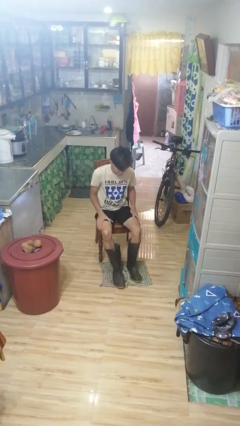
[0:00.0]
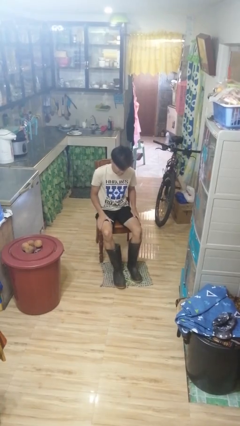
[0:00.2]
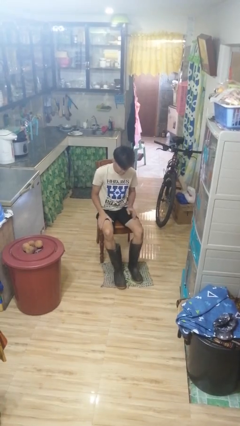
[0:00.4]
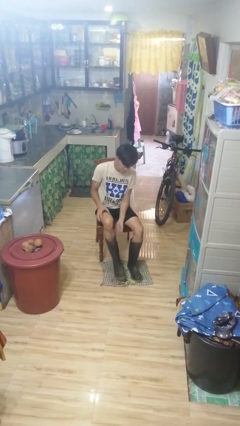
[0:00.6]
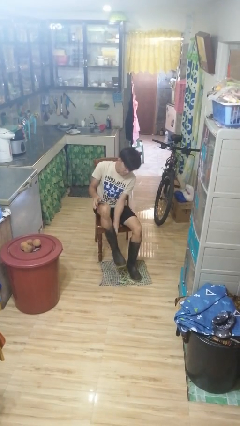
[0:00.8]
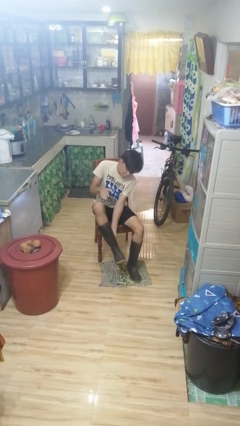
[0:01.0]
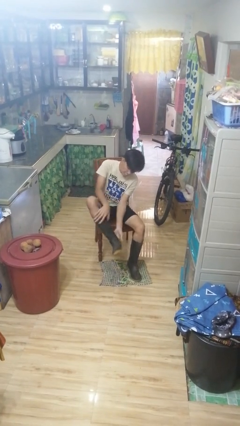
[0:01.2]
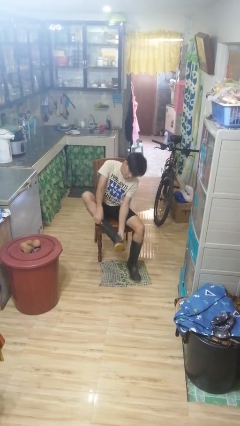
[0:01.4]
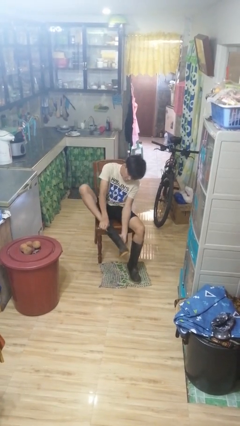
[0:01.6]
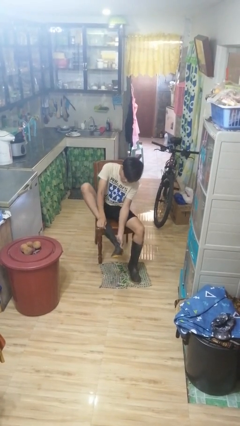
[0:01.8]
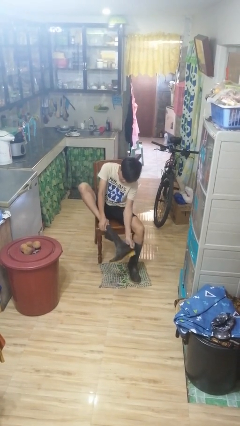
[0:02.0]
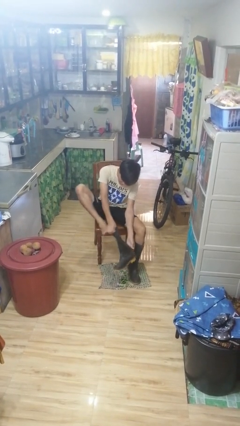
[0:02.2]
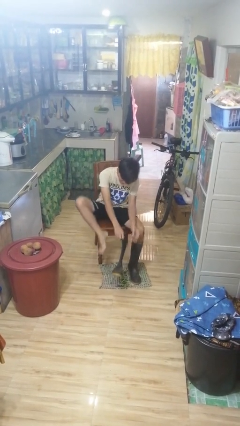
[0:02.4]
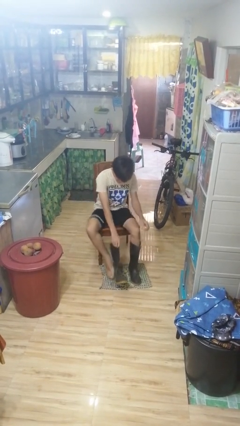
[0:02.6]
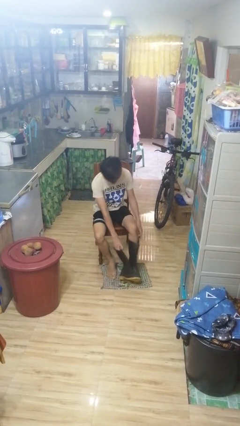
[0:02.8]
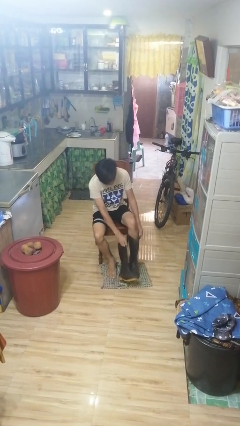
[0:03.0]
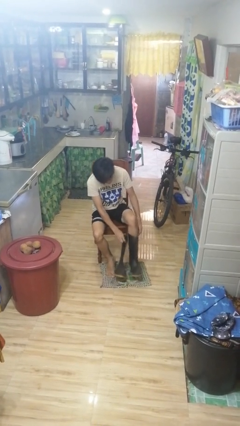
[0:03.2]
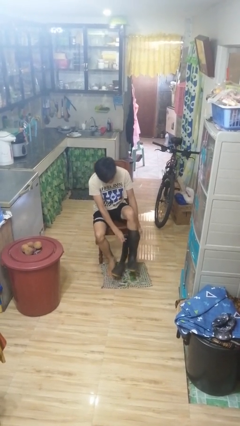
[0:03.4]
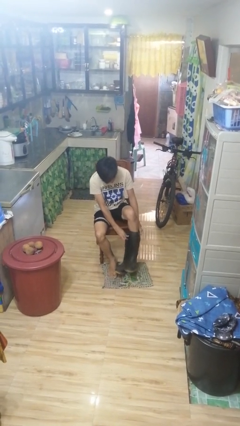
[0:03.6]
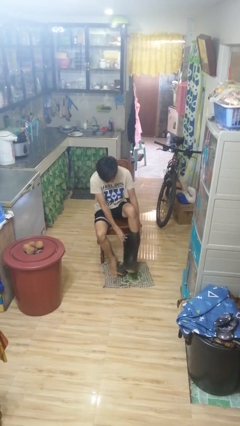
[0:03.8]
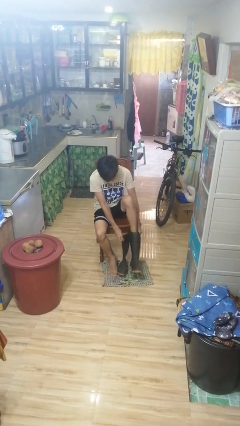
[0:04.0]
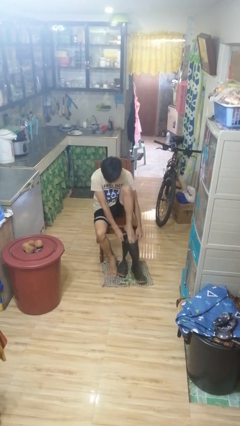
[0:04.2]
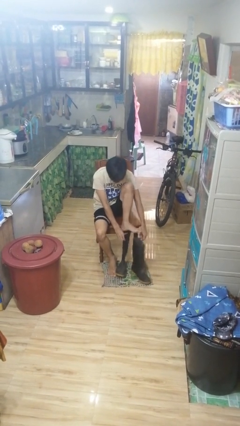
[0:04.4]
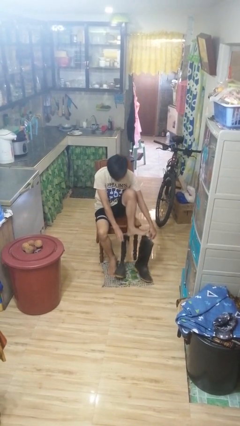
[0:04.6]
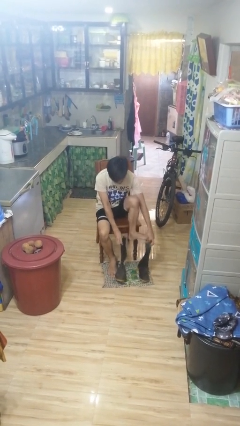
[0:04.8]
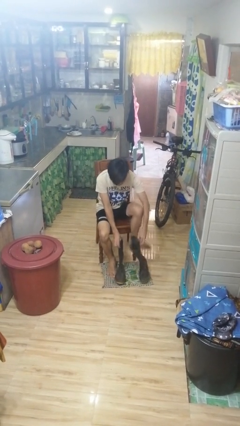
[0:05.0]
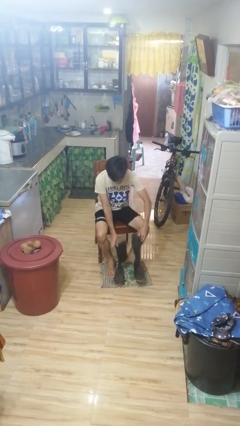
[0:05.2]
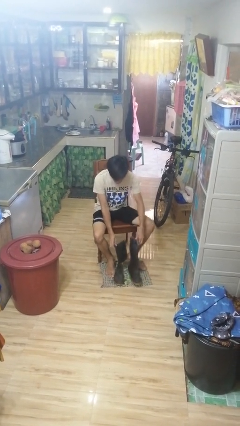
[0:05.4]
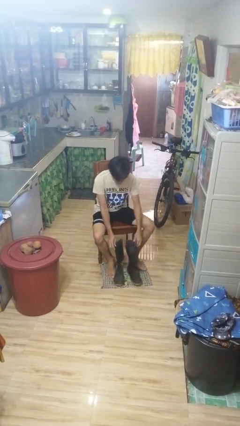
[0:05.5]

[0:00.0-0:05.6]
person takes off boots

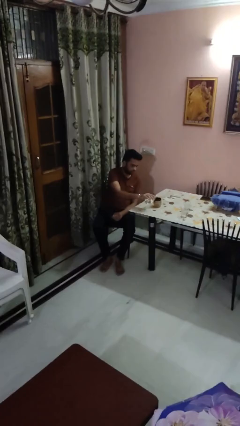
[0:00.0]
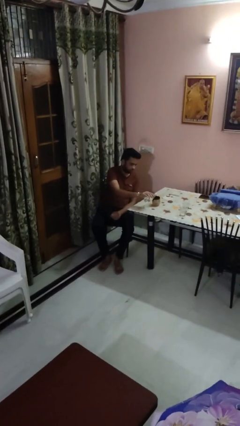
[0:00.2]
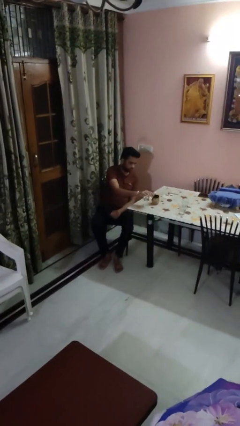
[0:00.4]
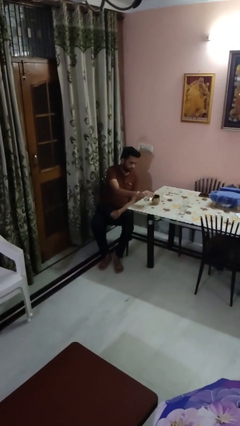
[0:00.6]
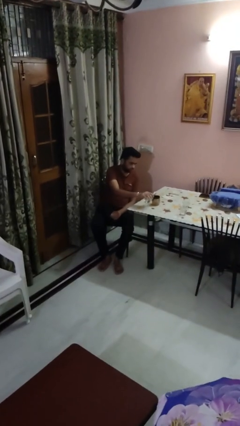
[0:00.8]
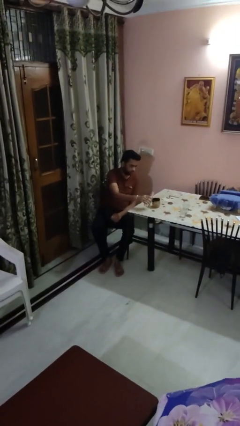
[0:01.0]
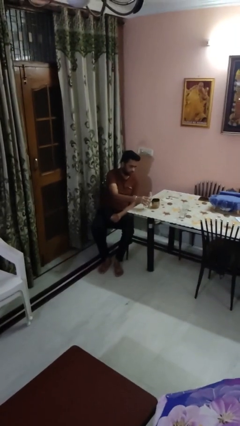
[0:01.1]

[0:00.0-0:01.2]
person pours liquid into cup

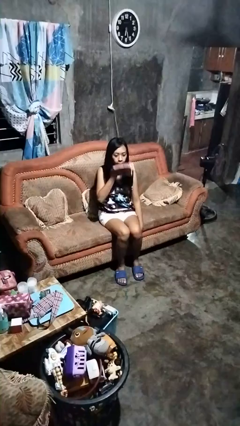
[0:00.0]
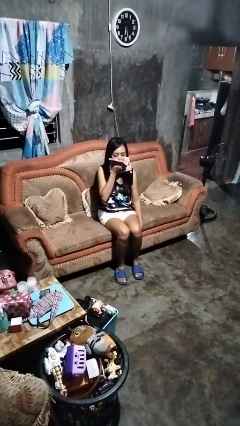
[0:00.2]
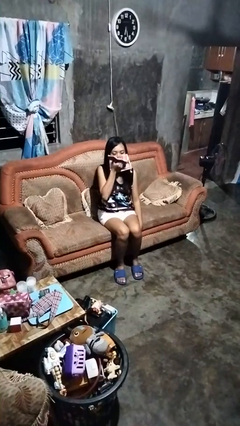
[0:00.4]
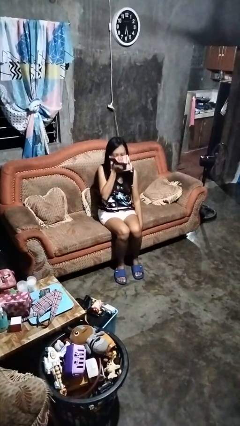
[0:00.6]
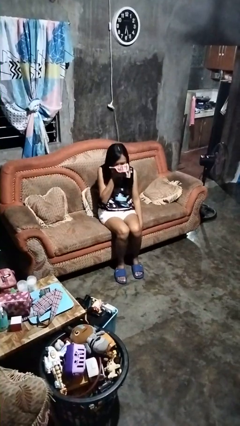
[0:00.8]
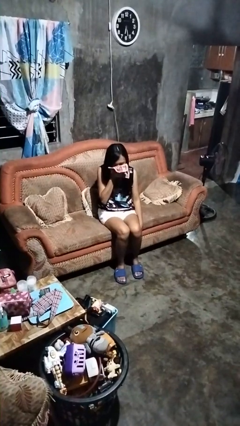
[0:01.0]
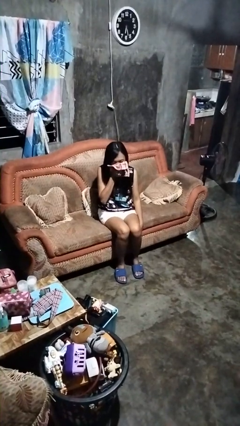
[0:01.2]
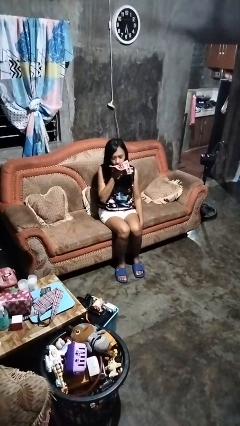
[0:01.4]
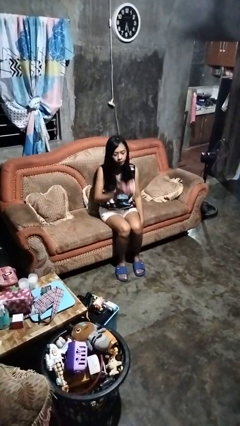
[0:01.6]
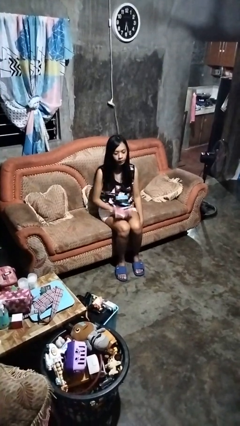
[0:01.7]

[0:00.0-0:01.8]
person blows nose

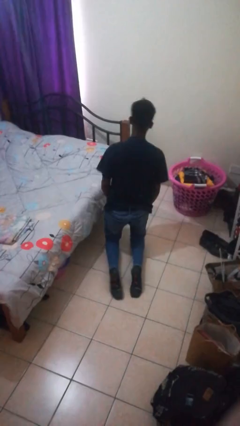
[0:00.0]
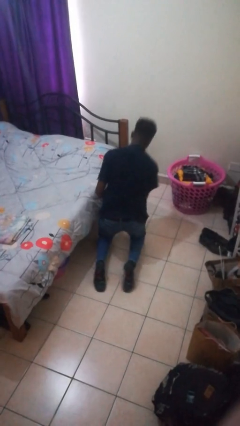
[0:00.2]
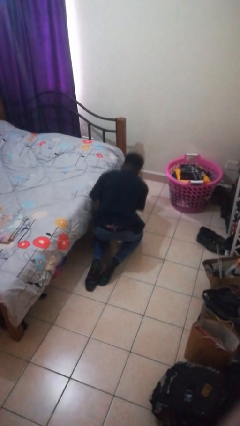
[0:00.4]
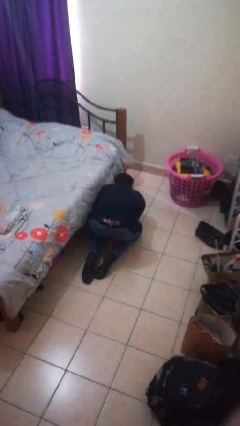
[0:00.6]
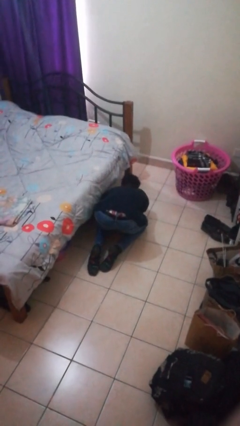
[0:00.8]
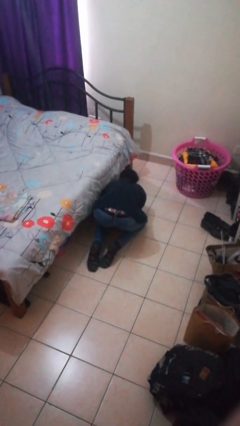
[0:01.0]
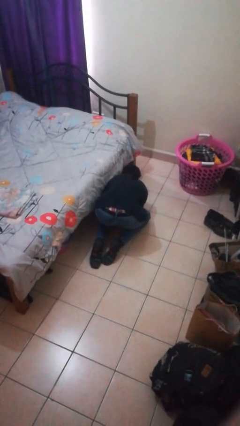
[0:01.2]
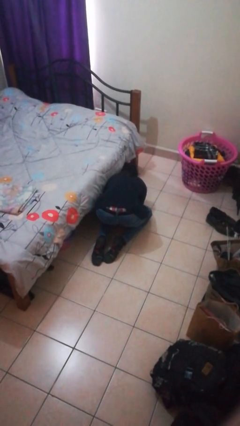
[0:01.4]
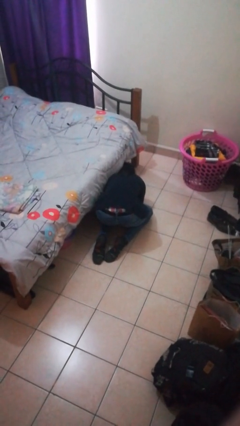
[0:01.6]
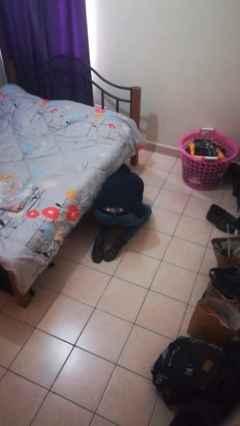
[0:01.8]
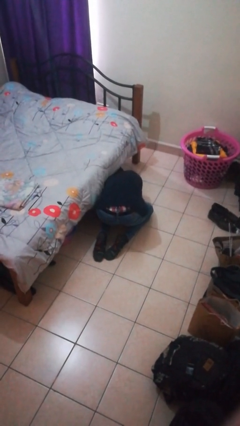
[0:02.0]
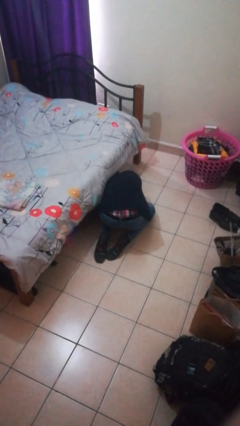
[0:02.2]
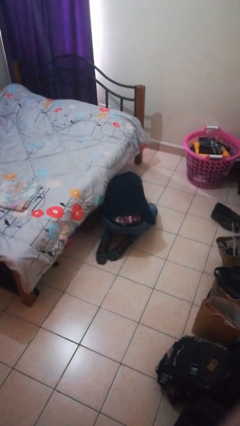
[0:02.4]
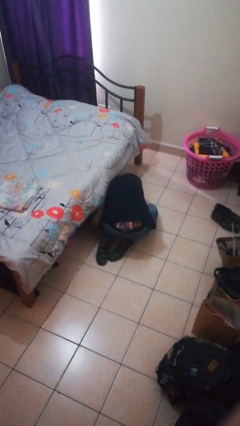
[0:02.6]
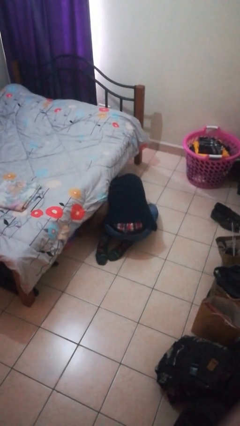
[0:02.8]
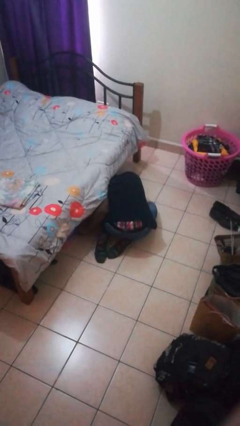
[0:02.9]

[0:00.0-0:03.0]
person searches under bed

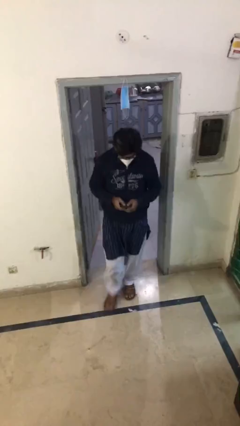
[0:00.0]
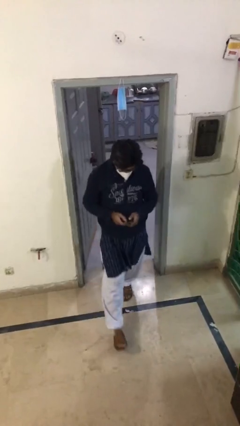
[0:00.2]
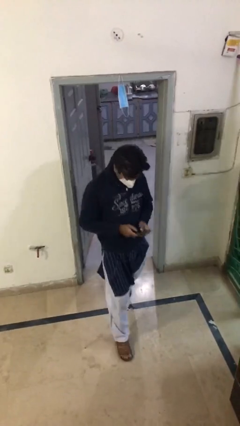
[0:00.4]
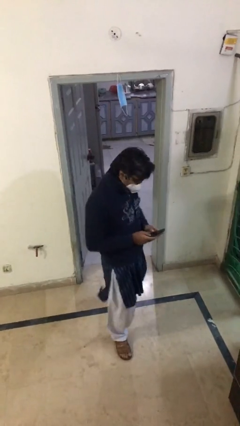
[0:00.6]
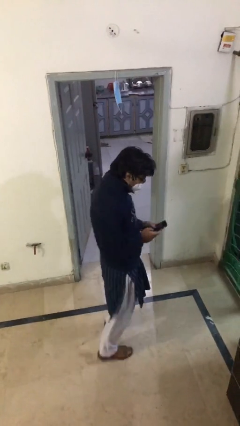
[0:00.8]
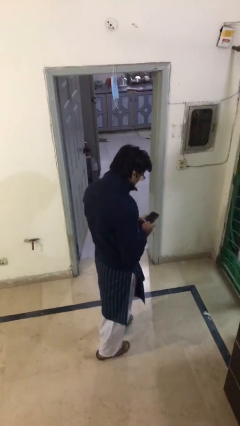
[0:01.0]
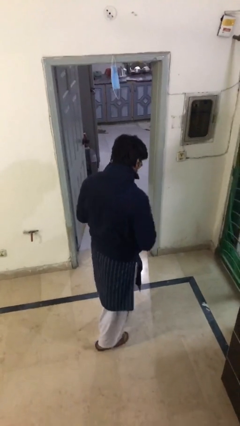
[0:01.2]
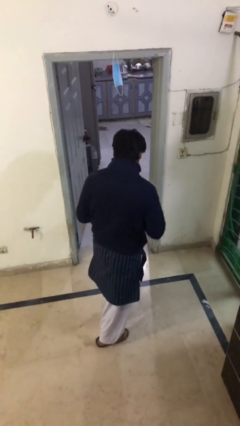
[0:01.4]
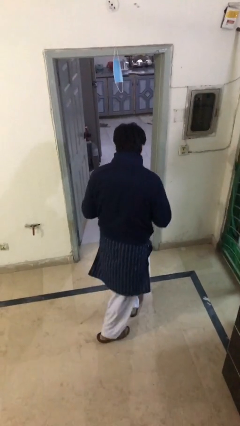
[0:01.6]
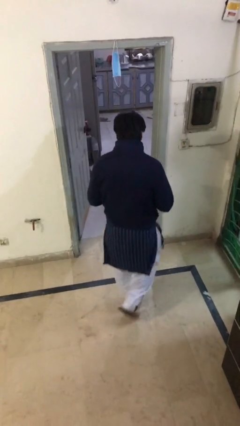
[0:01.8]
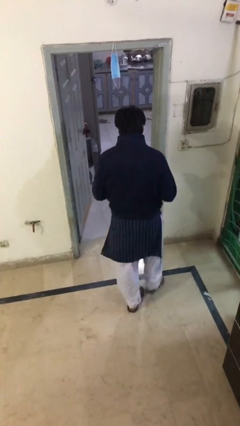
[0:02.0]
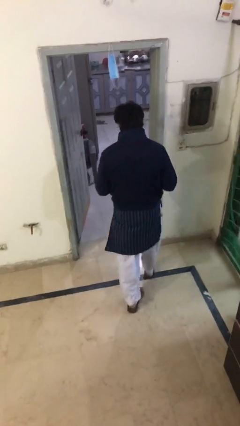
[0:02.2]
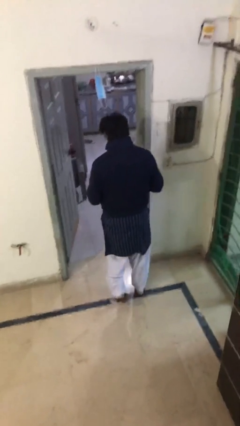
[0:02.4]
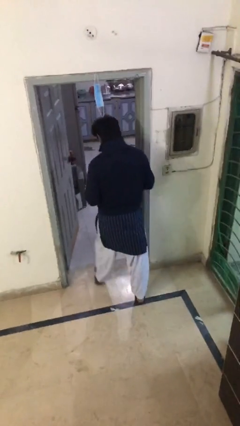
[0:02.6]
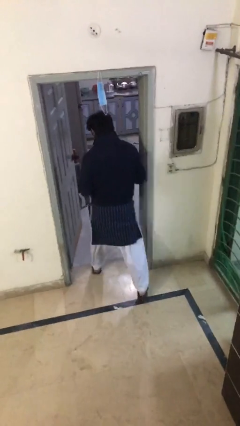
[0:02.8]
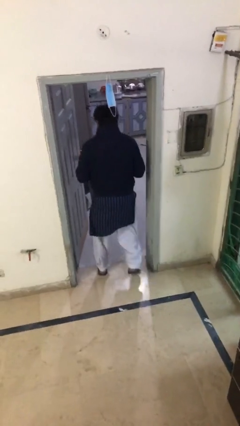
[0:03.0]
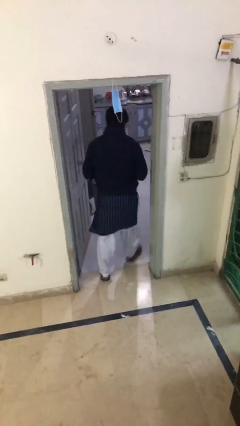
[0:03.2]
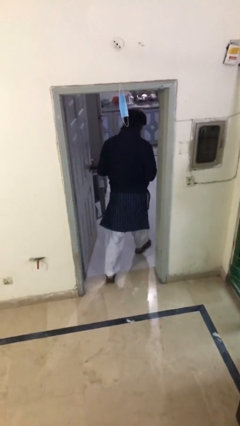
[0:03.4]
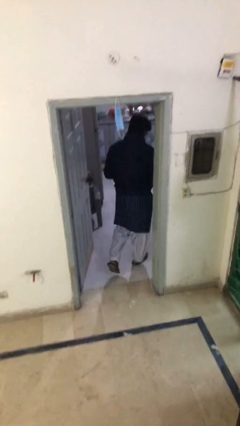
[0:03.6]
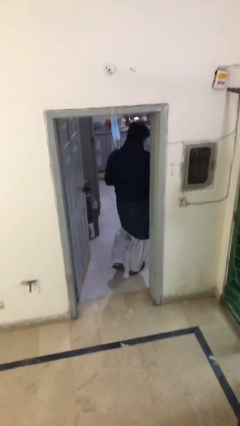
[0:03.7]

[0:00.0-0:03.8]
person exits scene through structure

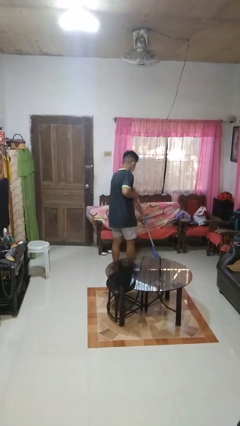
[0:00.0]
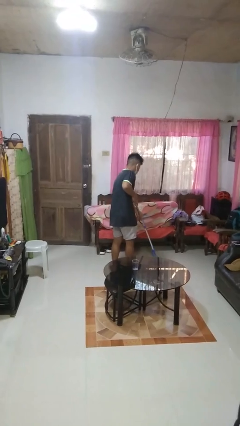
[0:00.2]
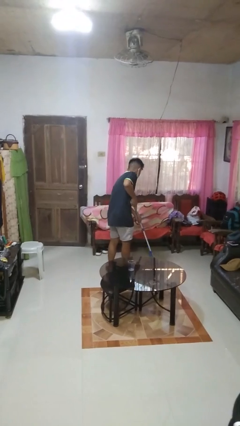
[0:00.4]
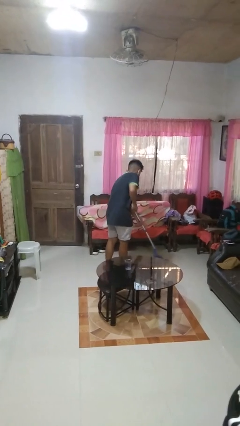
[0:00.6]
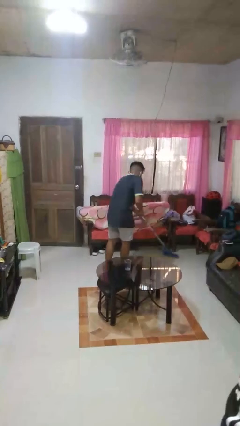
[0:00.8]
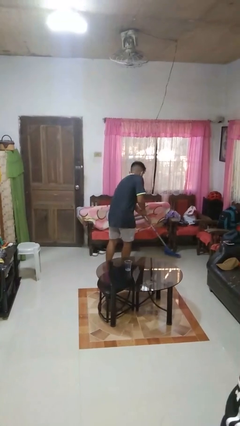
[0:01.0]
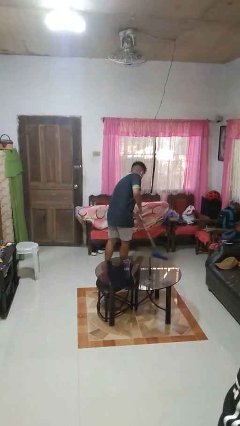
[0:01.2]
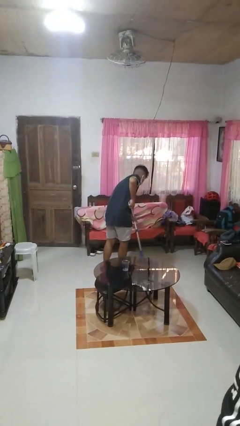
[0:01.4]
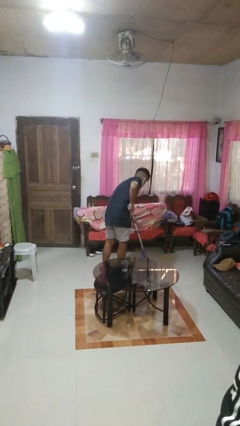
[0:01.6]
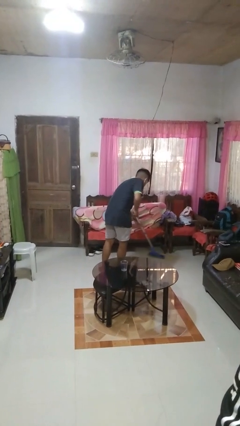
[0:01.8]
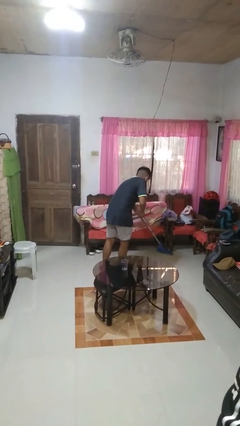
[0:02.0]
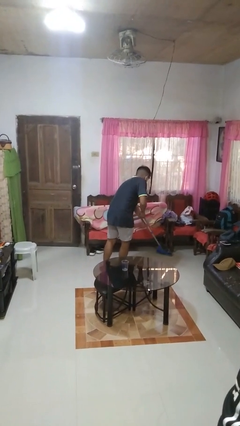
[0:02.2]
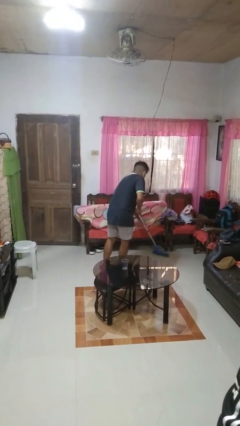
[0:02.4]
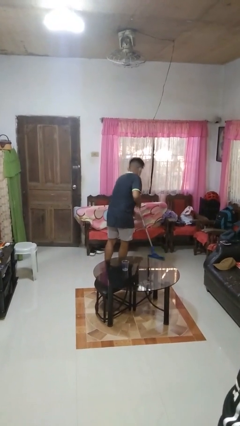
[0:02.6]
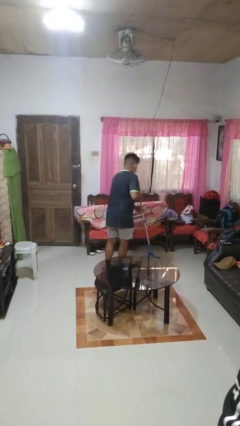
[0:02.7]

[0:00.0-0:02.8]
person mops
